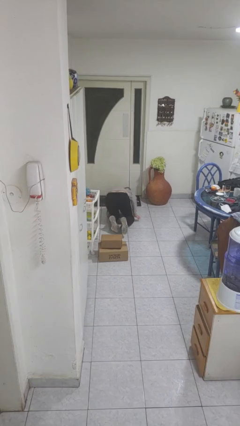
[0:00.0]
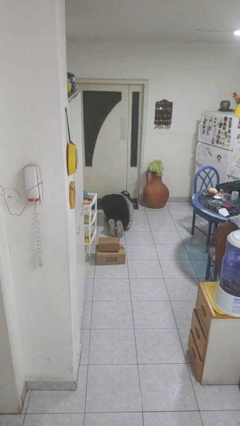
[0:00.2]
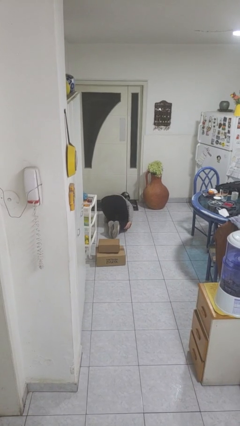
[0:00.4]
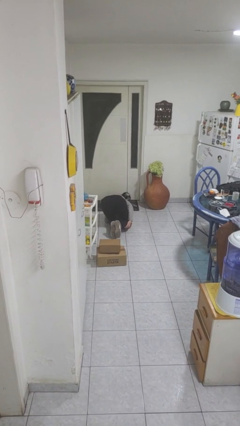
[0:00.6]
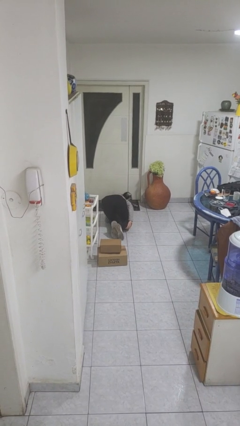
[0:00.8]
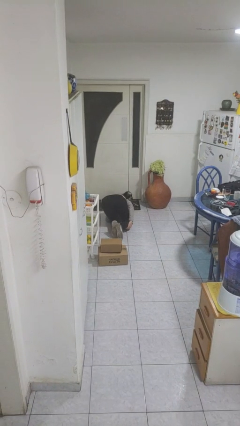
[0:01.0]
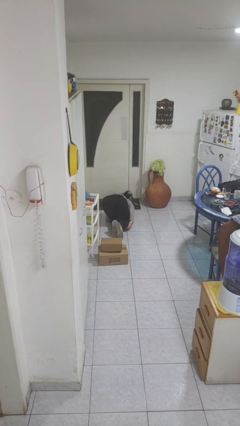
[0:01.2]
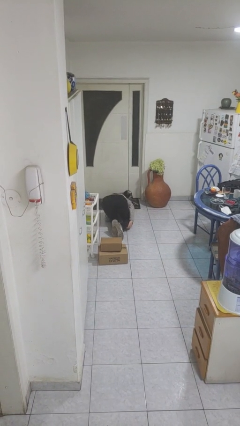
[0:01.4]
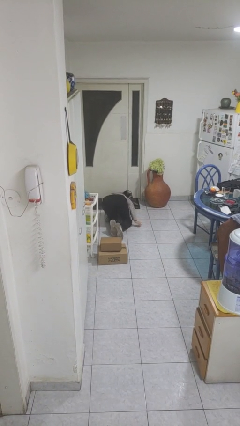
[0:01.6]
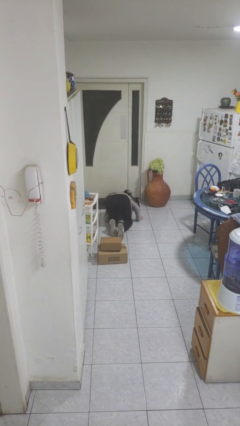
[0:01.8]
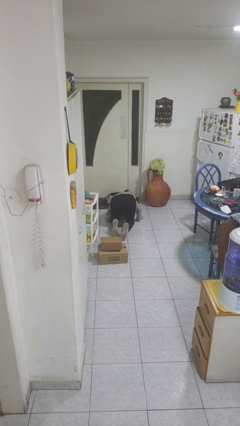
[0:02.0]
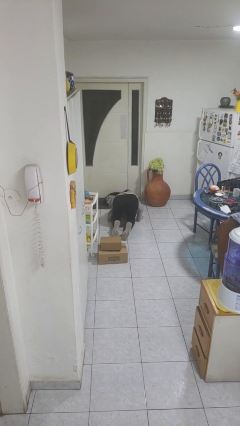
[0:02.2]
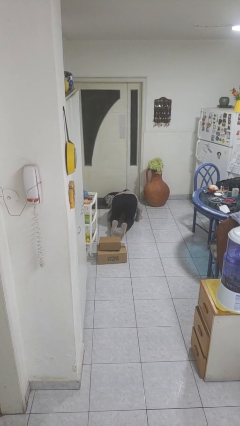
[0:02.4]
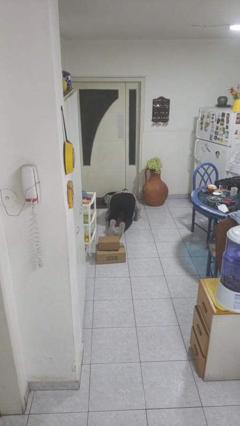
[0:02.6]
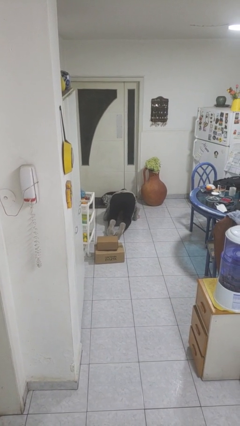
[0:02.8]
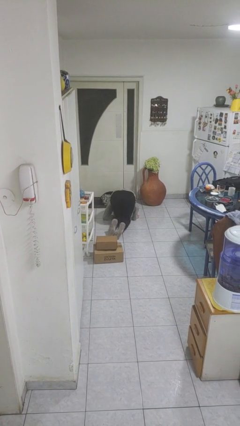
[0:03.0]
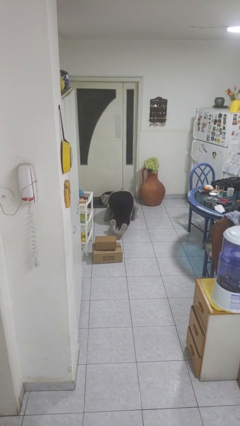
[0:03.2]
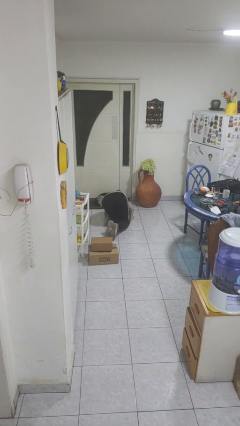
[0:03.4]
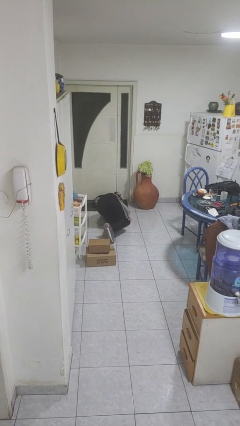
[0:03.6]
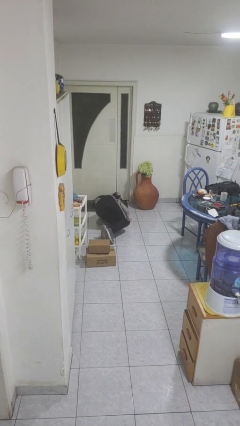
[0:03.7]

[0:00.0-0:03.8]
person lies down on floor

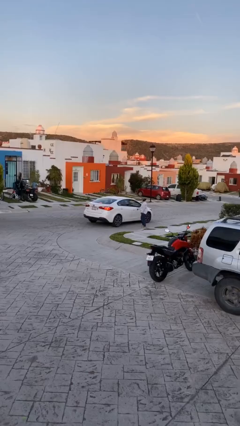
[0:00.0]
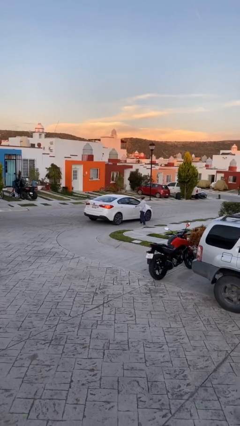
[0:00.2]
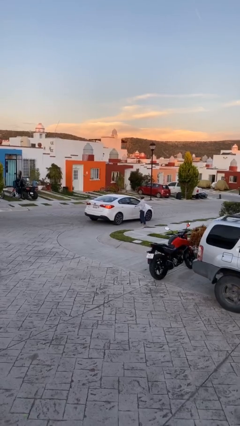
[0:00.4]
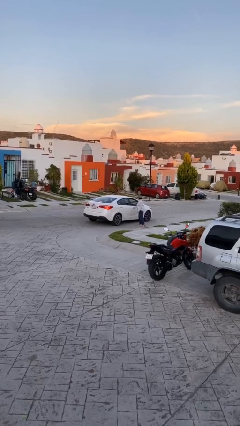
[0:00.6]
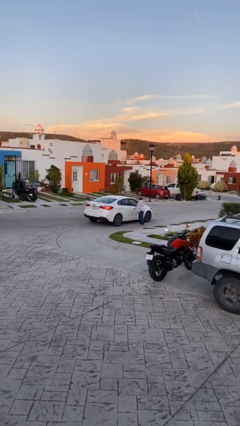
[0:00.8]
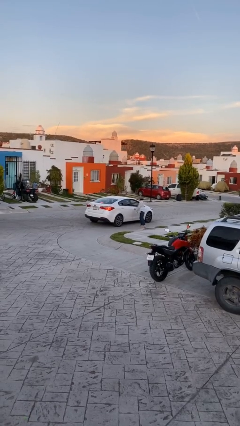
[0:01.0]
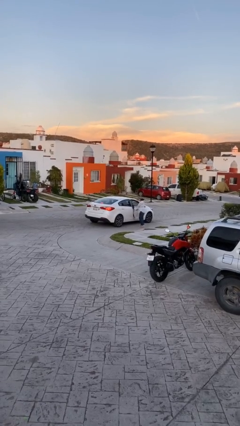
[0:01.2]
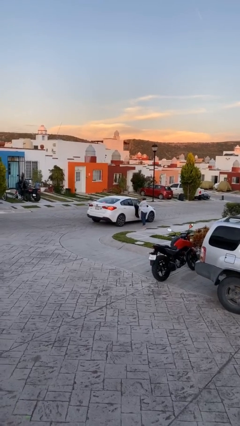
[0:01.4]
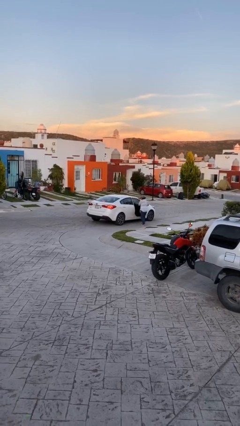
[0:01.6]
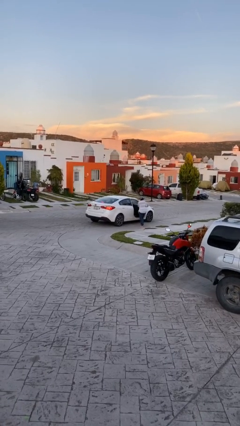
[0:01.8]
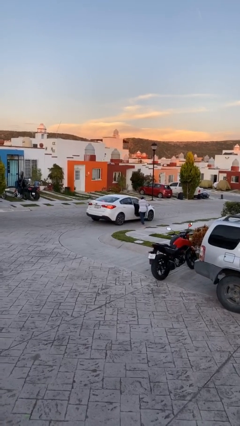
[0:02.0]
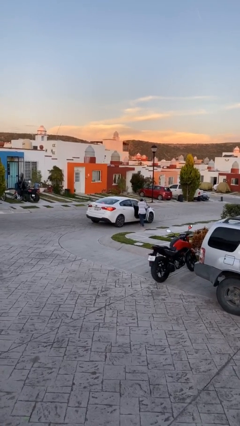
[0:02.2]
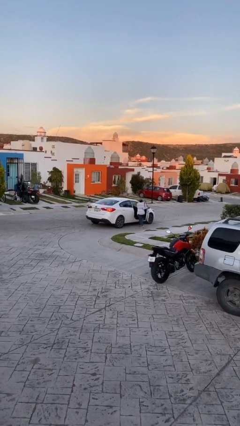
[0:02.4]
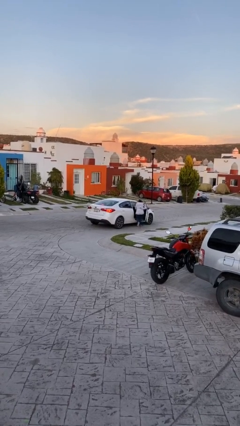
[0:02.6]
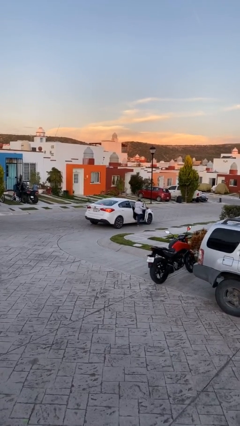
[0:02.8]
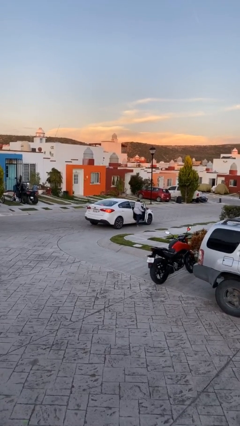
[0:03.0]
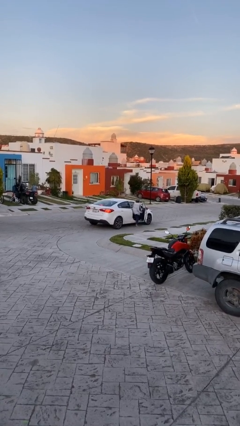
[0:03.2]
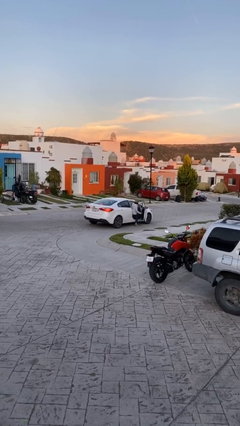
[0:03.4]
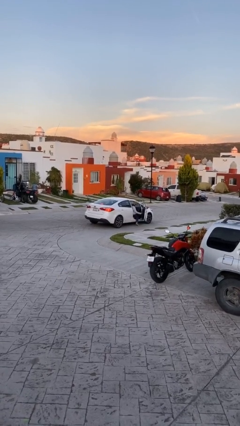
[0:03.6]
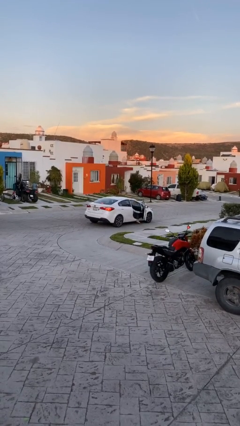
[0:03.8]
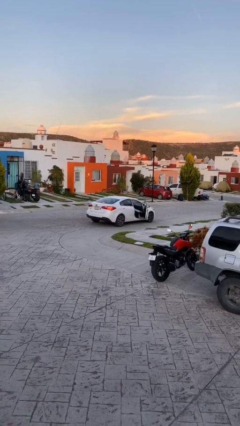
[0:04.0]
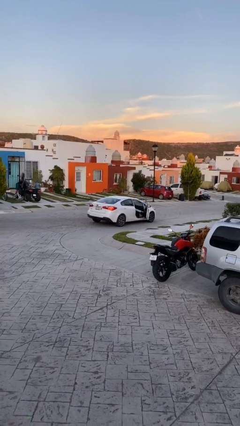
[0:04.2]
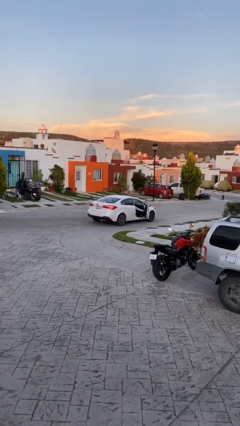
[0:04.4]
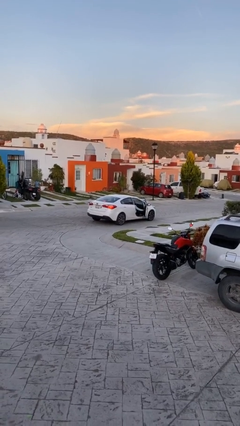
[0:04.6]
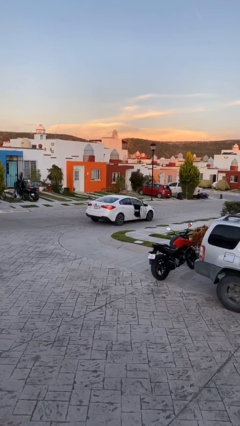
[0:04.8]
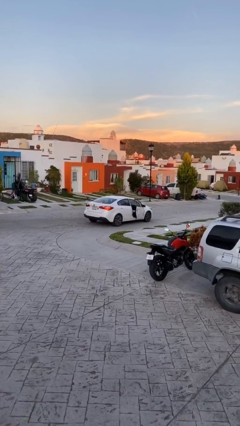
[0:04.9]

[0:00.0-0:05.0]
car picks up person

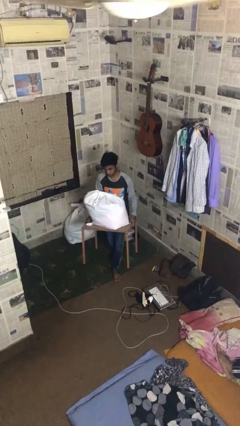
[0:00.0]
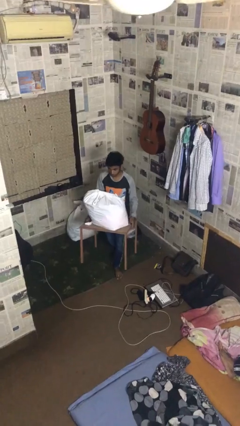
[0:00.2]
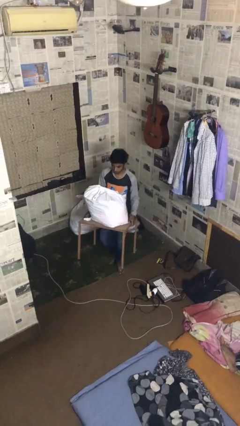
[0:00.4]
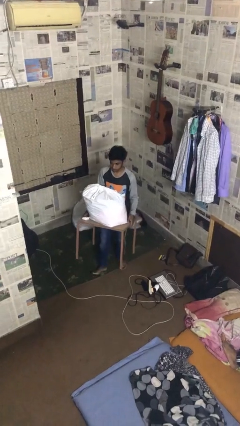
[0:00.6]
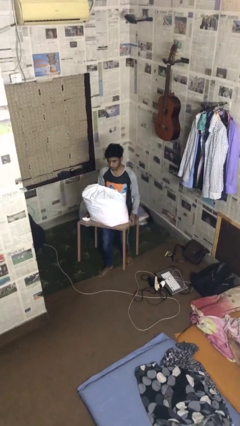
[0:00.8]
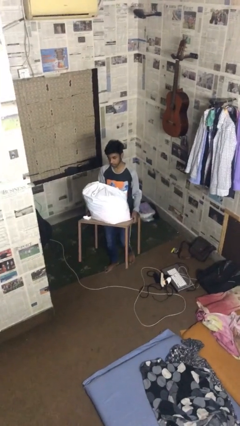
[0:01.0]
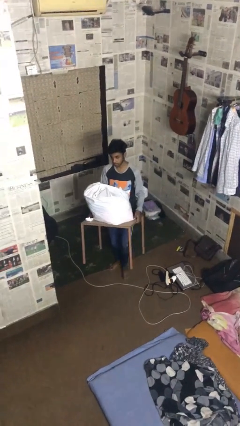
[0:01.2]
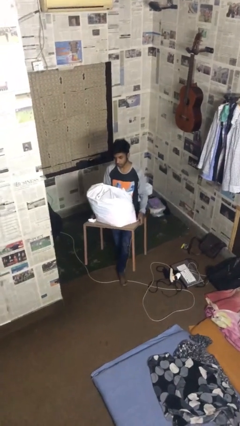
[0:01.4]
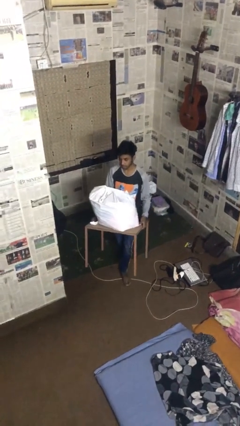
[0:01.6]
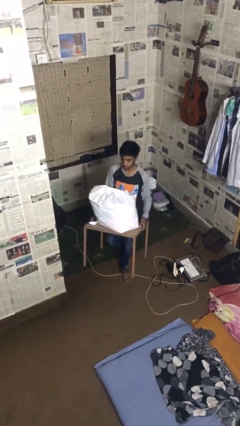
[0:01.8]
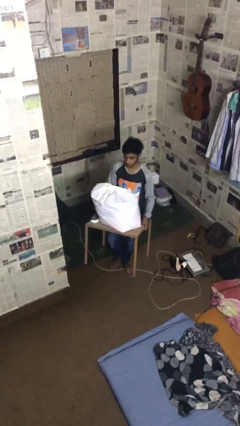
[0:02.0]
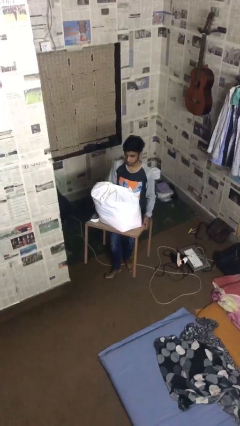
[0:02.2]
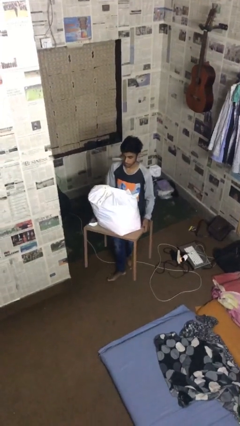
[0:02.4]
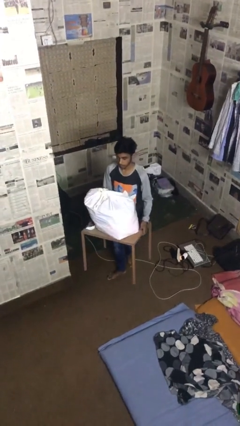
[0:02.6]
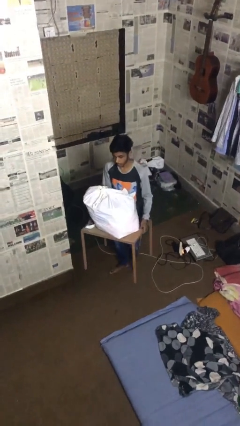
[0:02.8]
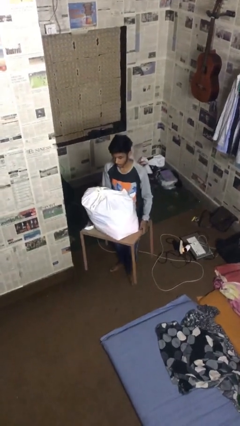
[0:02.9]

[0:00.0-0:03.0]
person carries heavy object

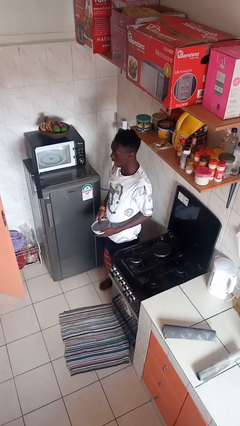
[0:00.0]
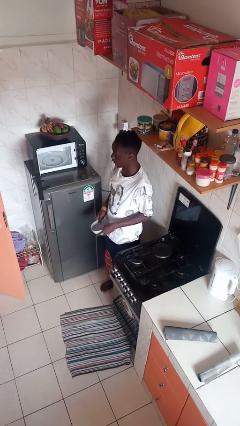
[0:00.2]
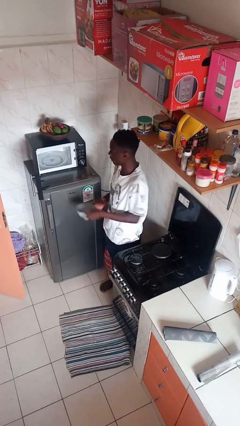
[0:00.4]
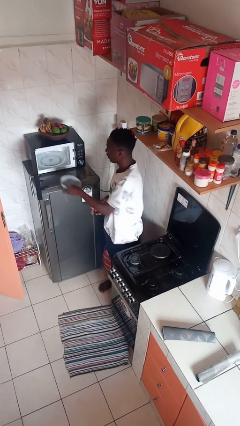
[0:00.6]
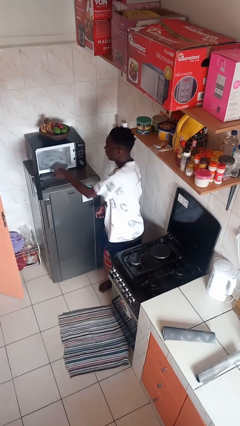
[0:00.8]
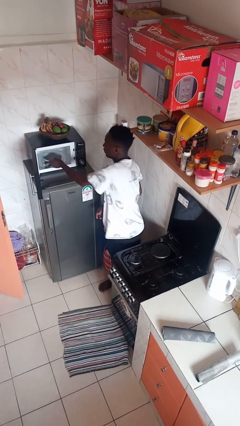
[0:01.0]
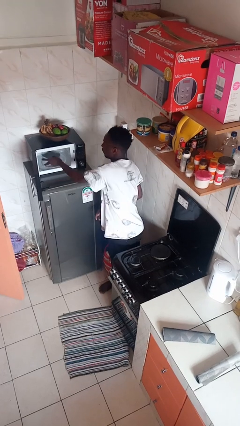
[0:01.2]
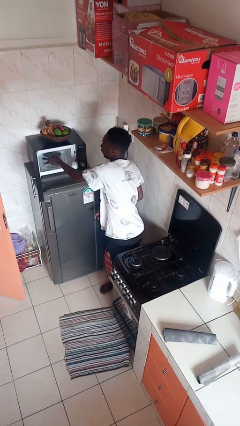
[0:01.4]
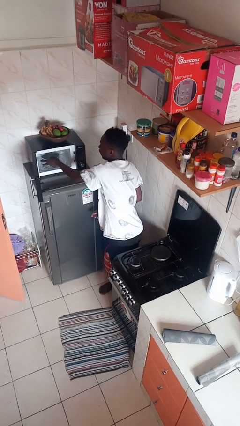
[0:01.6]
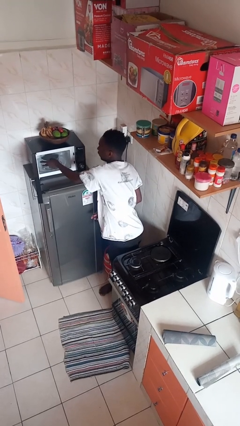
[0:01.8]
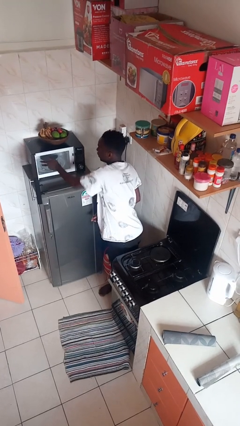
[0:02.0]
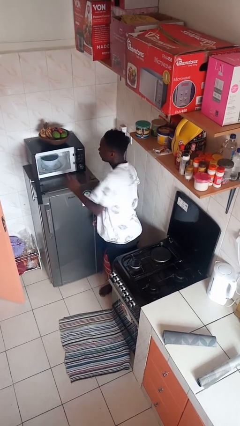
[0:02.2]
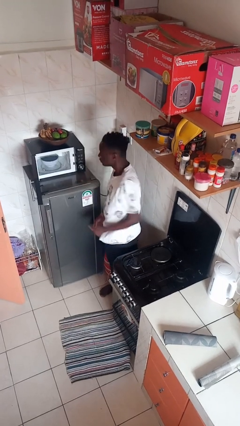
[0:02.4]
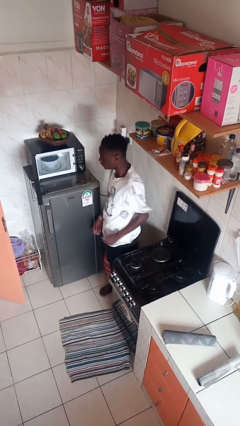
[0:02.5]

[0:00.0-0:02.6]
person puts object into microwave

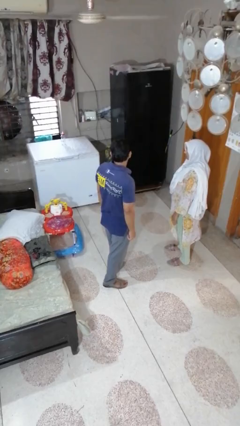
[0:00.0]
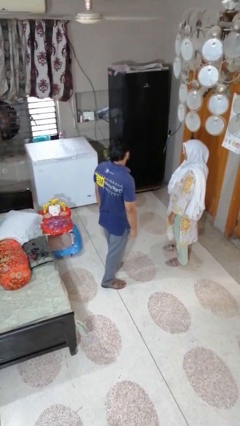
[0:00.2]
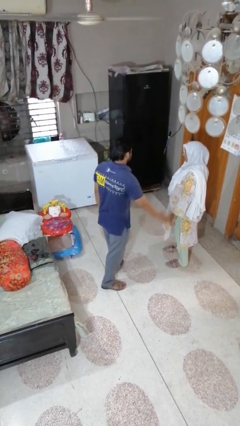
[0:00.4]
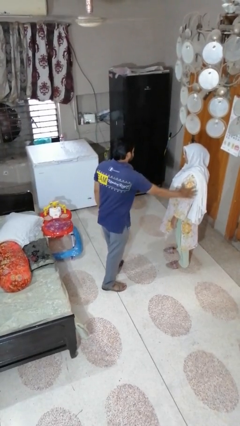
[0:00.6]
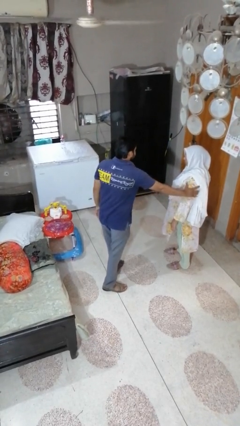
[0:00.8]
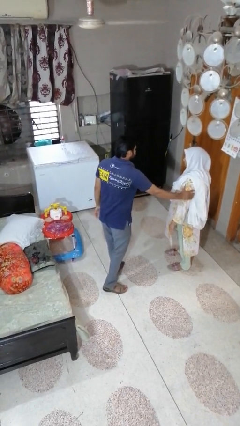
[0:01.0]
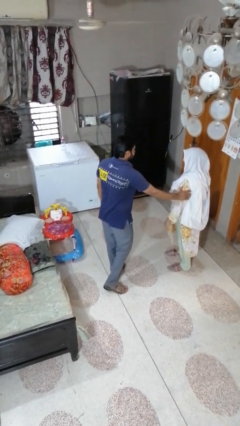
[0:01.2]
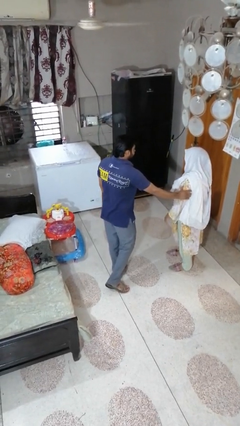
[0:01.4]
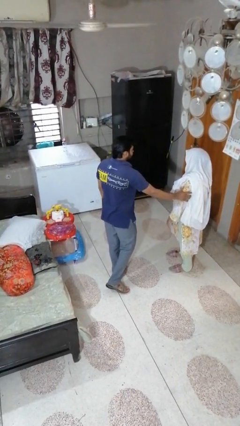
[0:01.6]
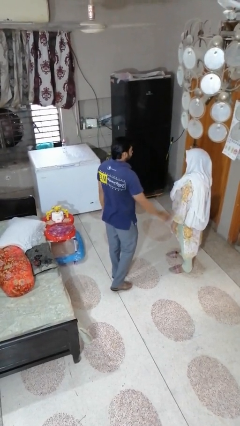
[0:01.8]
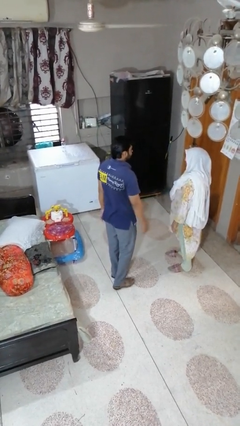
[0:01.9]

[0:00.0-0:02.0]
person grabs person by bicep

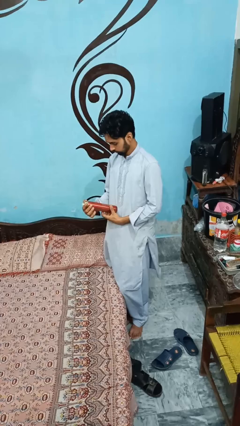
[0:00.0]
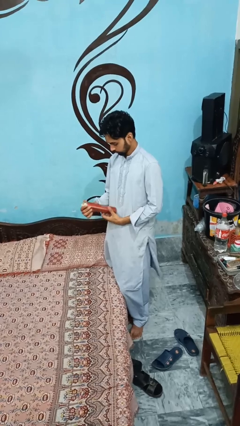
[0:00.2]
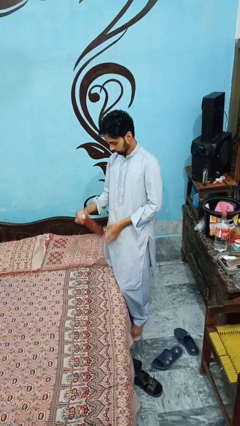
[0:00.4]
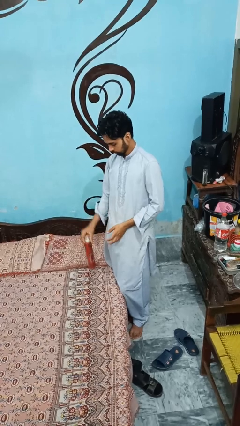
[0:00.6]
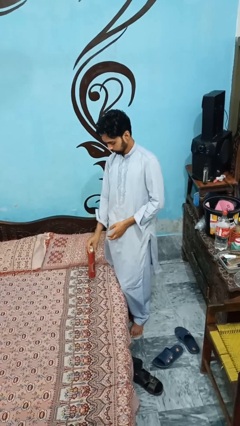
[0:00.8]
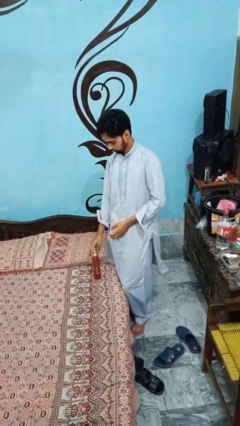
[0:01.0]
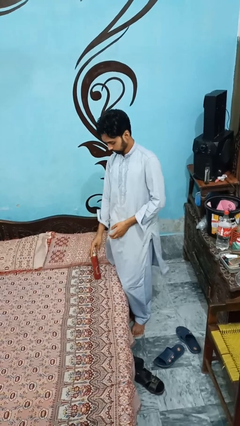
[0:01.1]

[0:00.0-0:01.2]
person puts down object on bed
